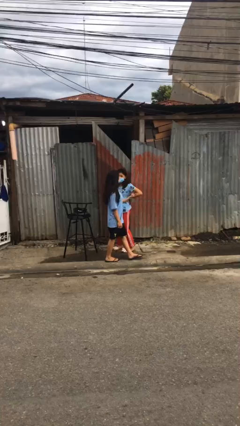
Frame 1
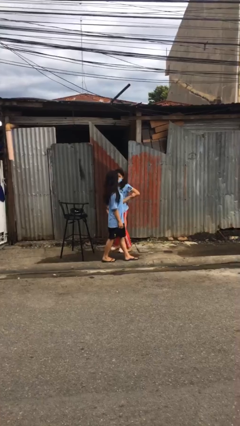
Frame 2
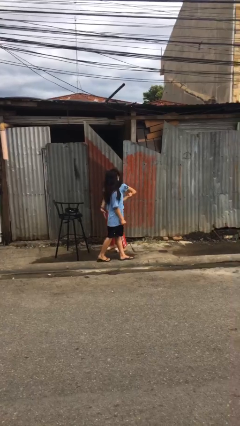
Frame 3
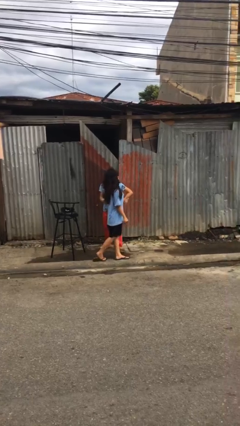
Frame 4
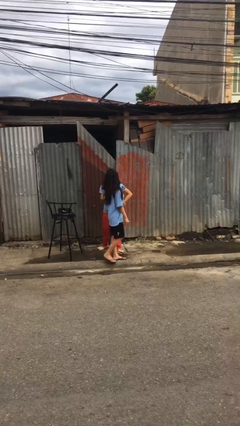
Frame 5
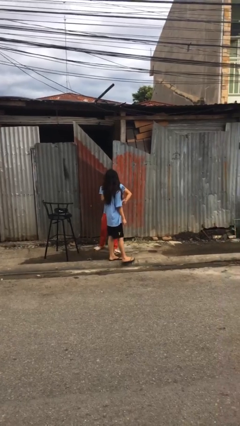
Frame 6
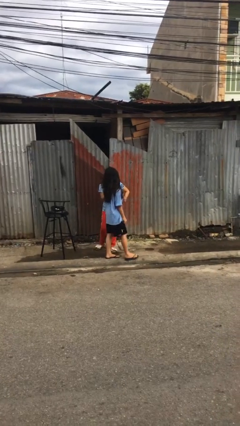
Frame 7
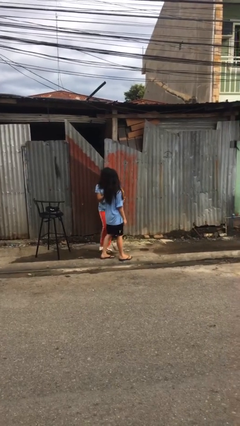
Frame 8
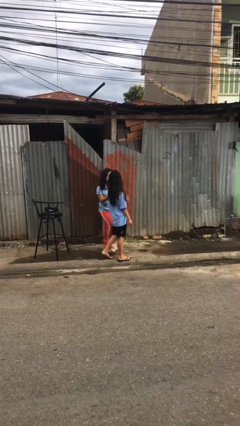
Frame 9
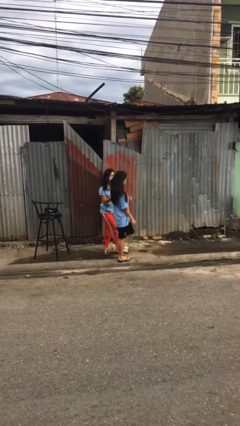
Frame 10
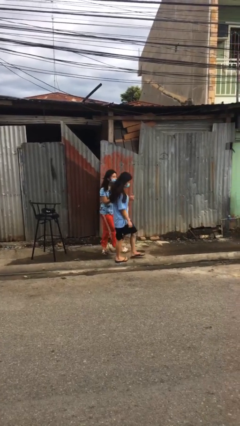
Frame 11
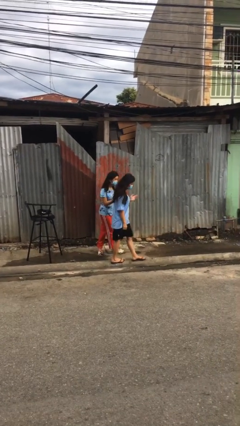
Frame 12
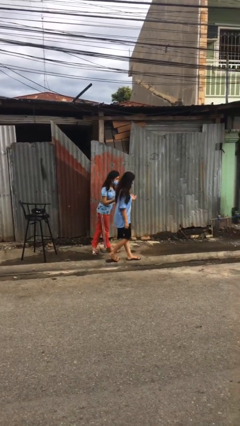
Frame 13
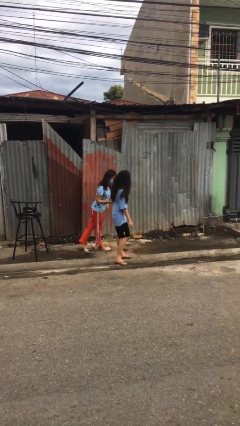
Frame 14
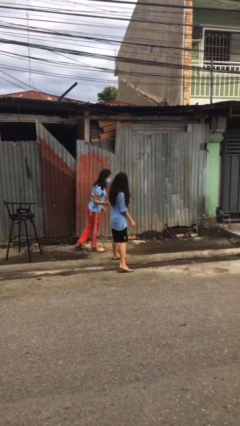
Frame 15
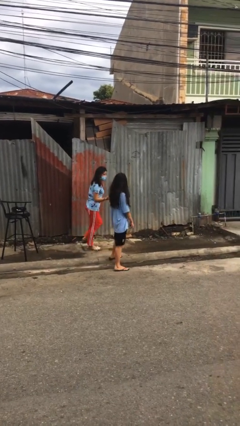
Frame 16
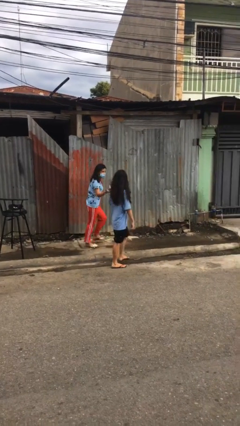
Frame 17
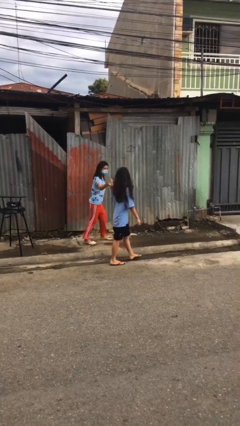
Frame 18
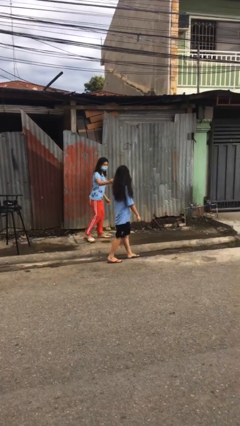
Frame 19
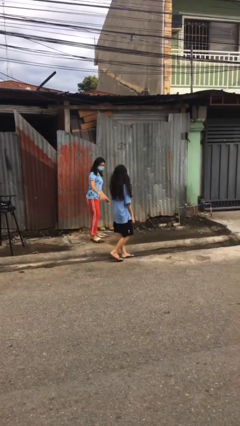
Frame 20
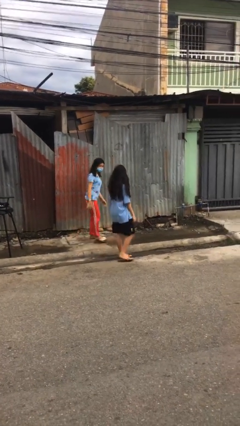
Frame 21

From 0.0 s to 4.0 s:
person talks to person

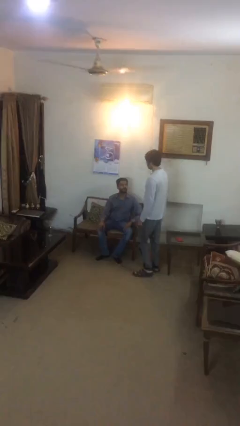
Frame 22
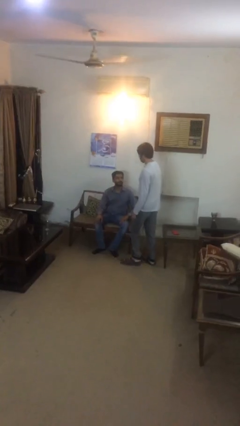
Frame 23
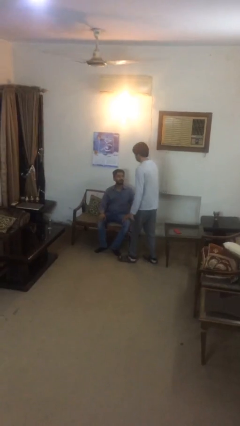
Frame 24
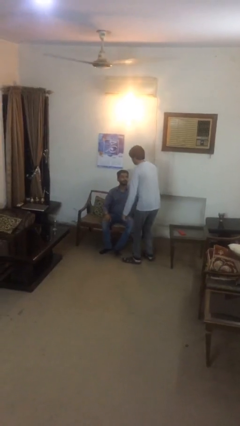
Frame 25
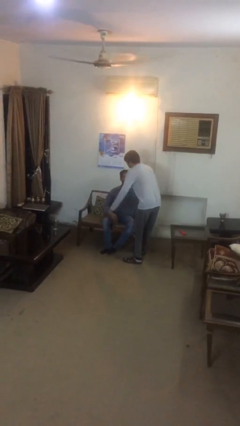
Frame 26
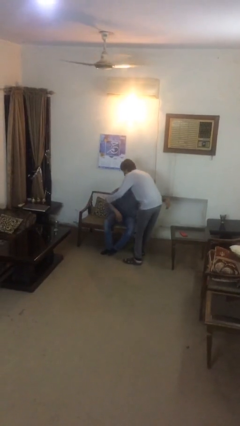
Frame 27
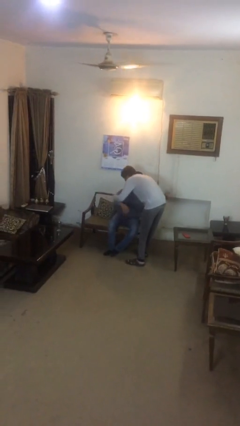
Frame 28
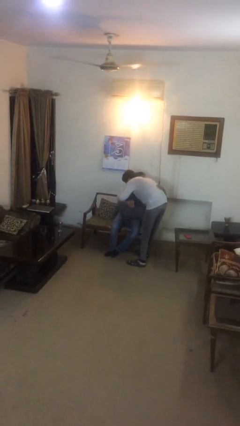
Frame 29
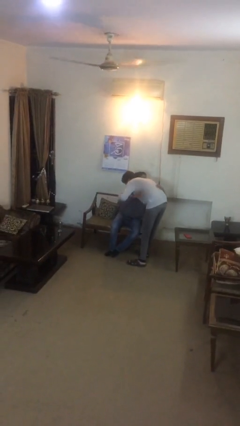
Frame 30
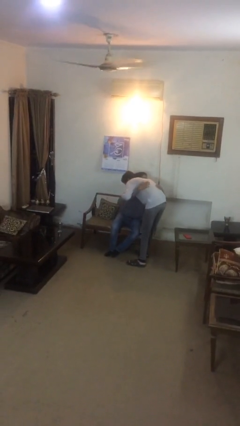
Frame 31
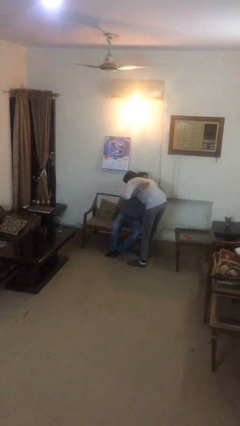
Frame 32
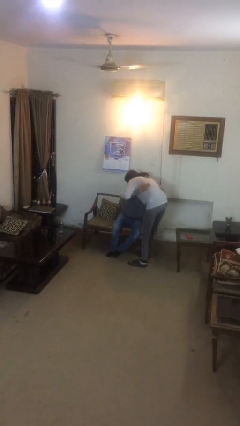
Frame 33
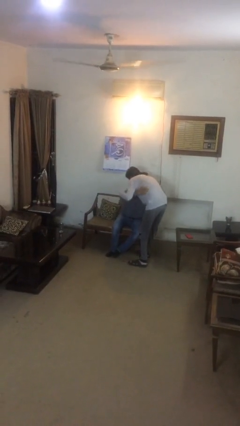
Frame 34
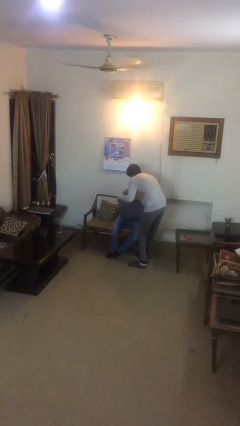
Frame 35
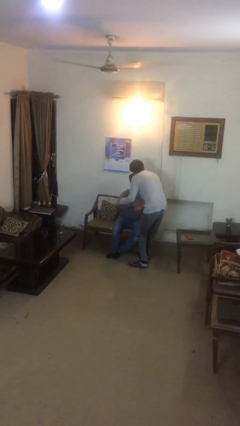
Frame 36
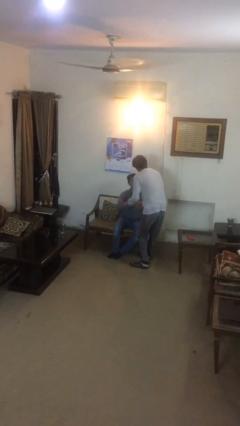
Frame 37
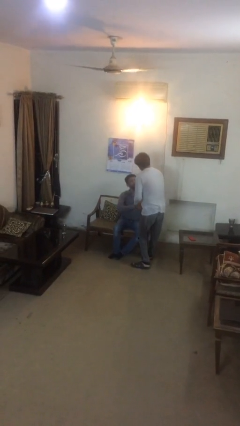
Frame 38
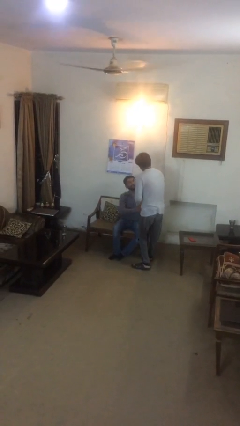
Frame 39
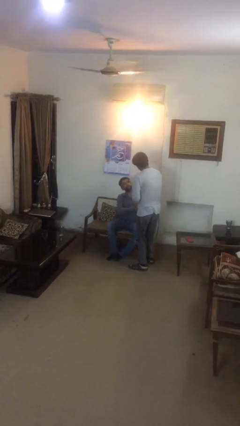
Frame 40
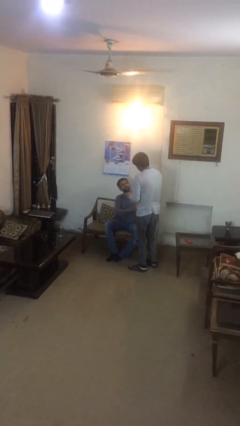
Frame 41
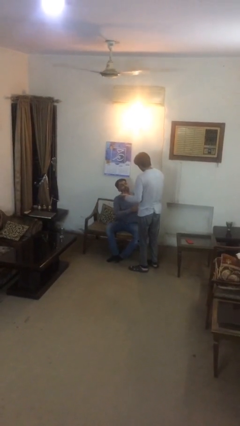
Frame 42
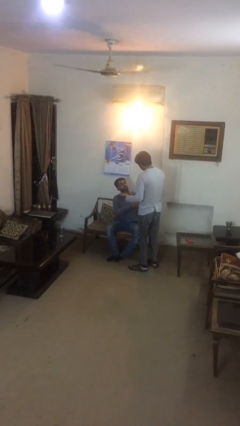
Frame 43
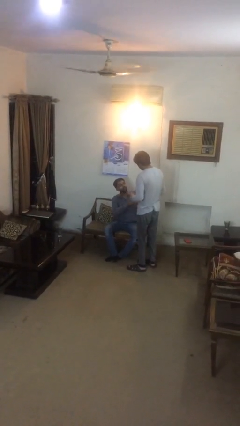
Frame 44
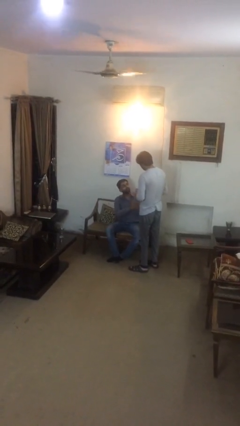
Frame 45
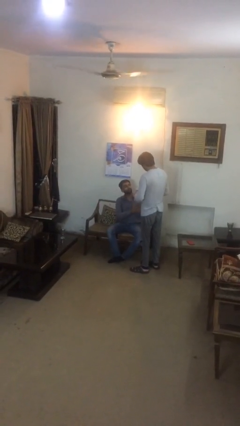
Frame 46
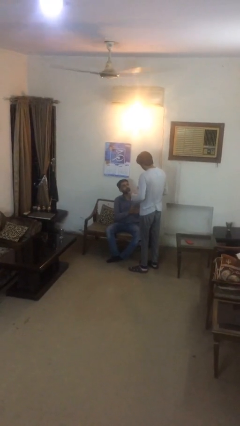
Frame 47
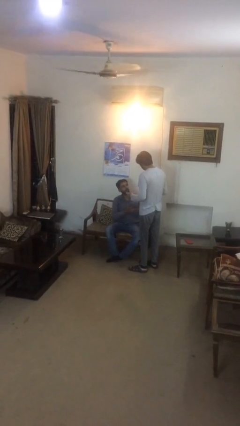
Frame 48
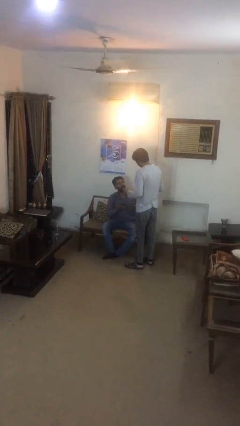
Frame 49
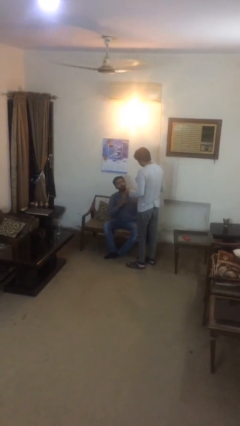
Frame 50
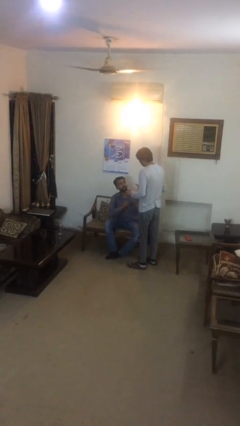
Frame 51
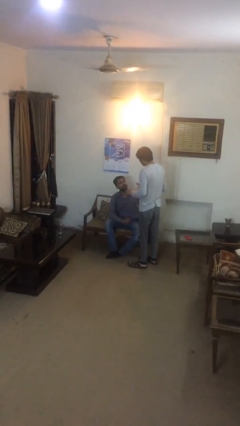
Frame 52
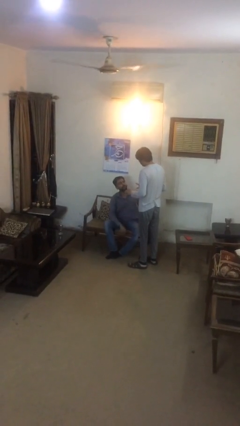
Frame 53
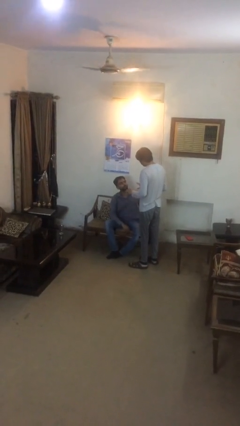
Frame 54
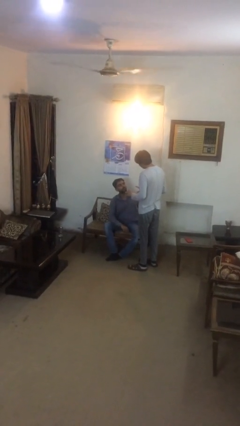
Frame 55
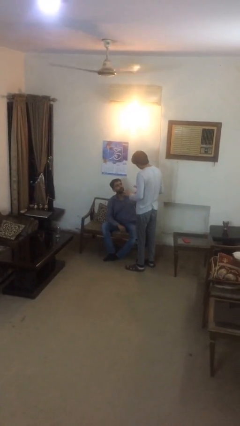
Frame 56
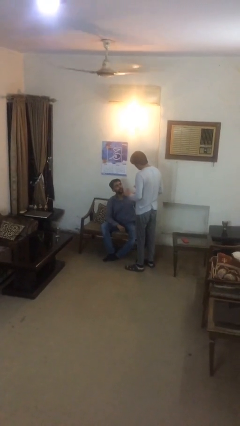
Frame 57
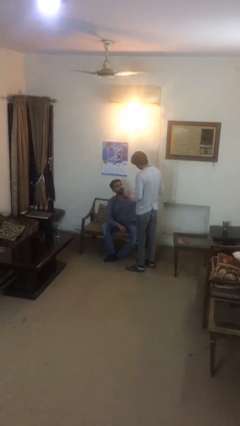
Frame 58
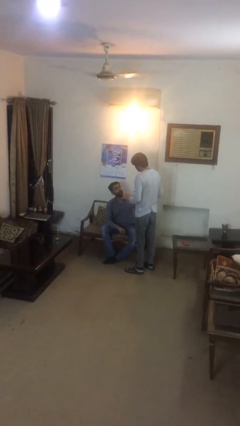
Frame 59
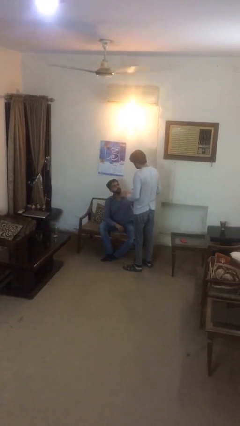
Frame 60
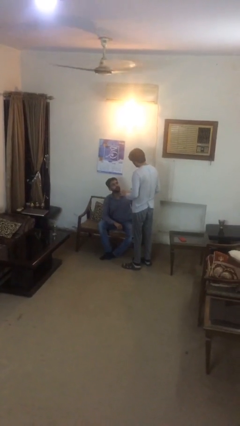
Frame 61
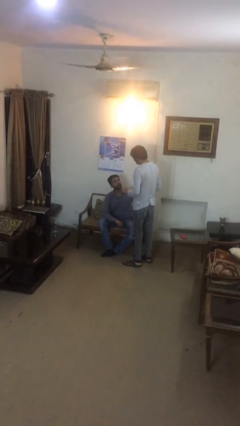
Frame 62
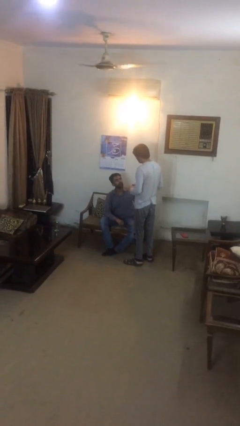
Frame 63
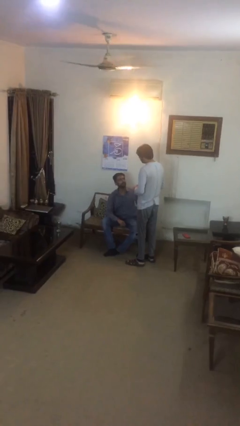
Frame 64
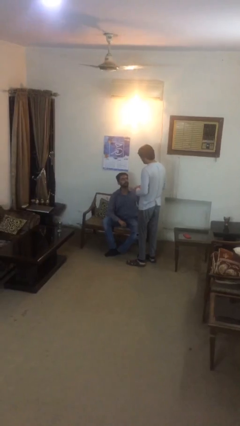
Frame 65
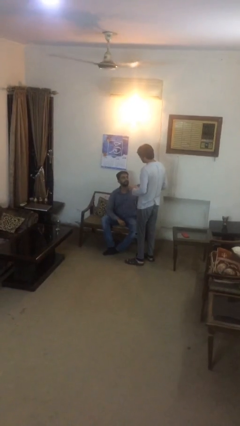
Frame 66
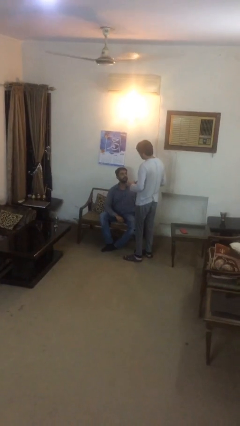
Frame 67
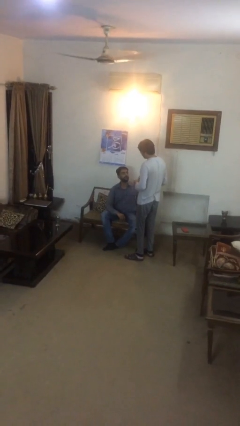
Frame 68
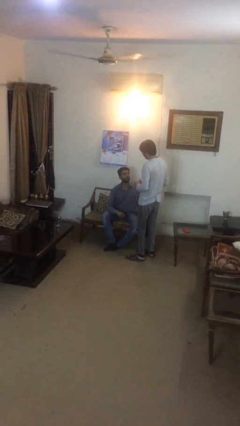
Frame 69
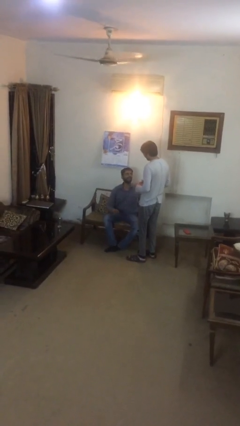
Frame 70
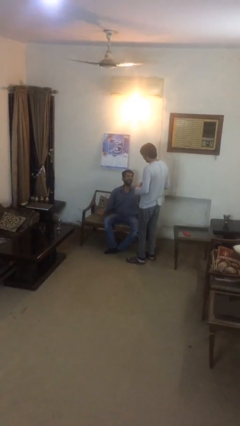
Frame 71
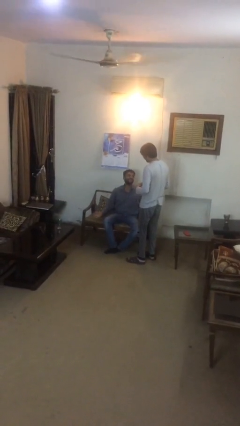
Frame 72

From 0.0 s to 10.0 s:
person embraces person

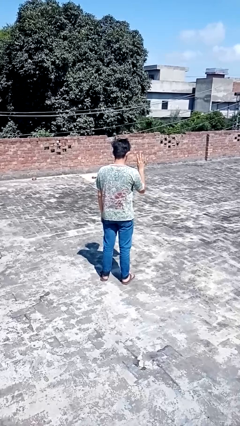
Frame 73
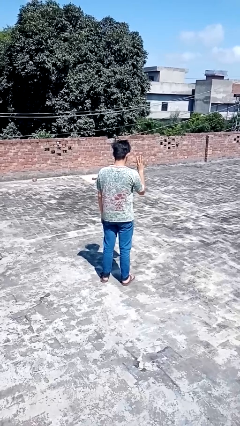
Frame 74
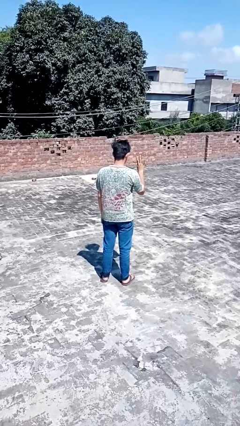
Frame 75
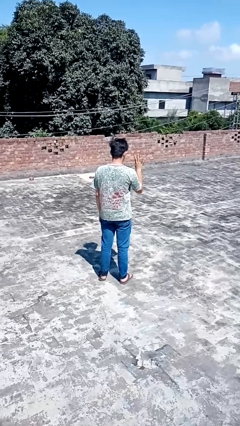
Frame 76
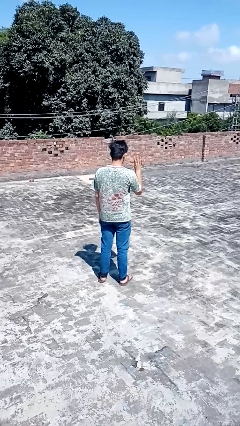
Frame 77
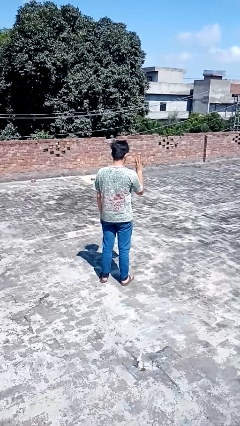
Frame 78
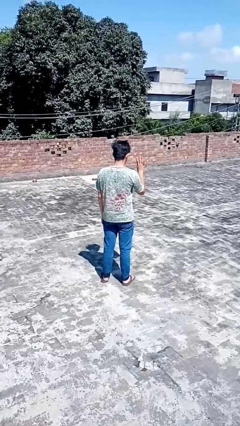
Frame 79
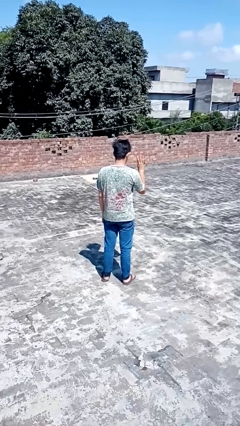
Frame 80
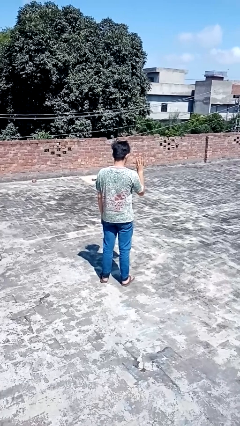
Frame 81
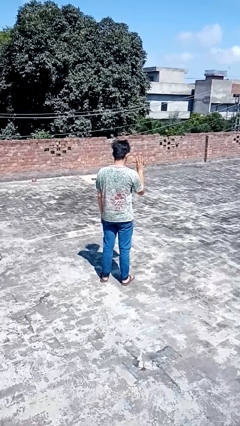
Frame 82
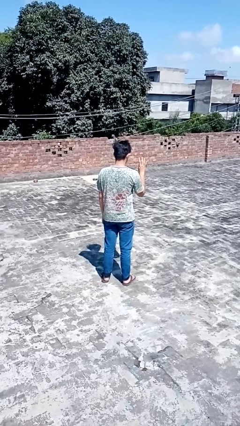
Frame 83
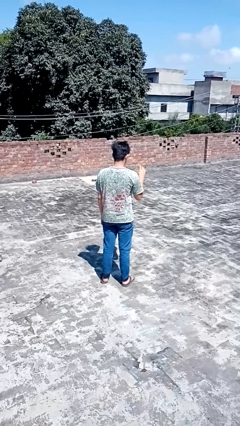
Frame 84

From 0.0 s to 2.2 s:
person gestures number four

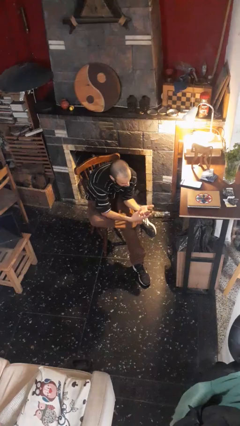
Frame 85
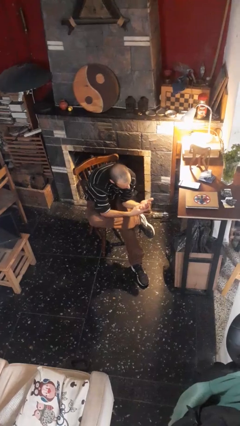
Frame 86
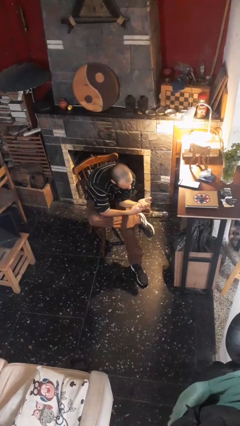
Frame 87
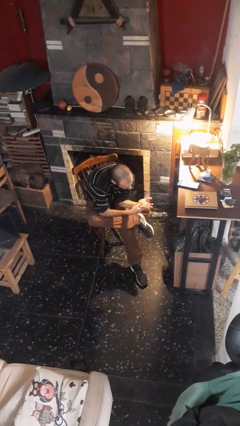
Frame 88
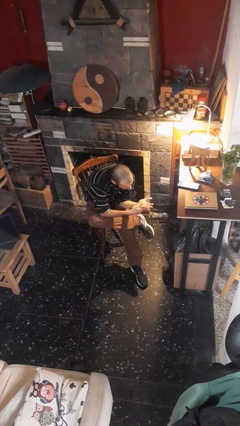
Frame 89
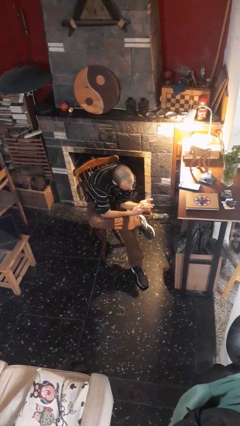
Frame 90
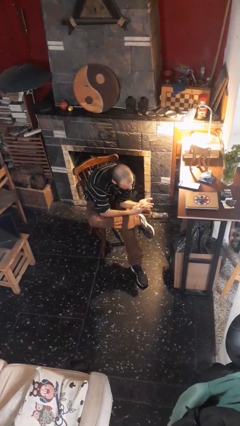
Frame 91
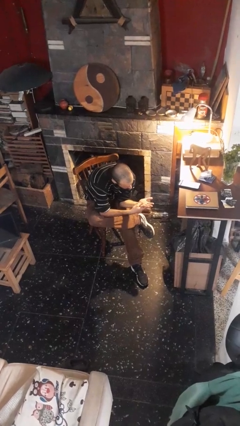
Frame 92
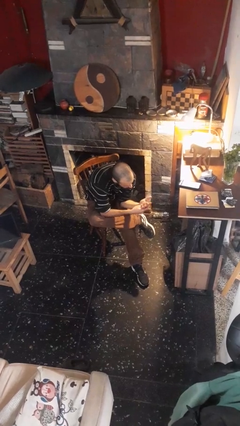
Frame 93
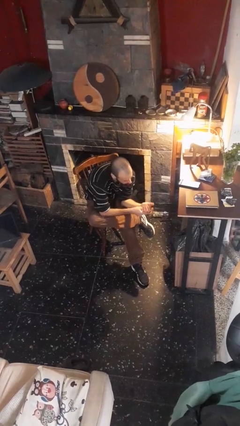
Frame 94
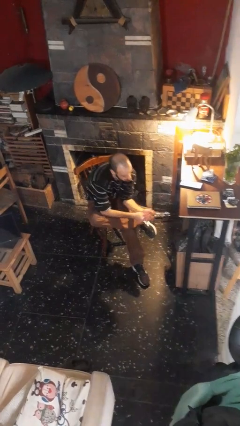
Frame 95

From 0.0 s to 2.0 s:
person looks at hands in lap
